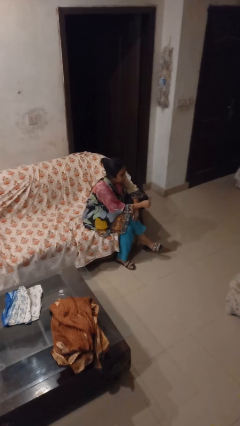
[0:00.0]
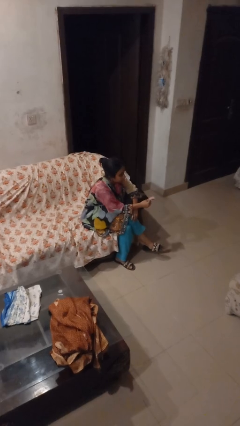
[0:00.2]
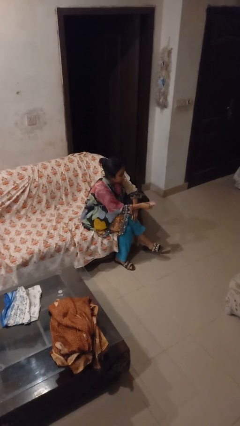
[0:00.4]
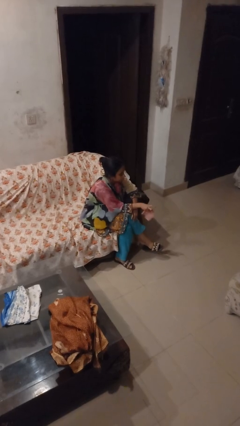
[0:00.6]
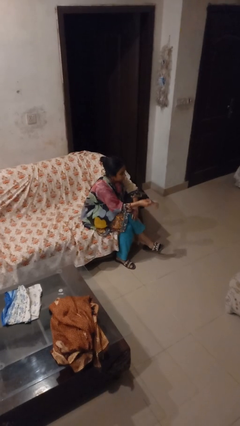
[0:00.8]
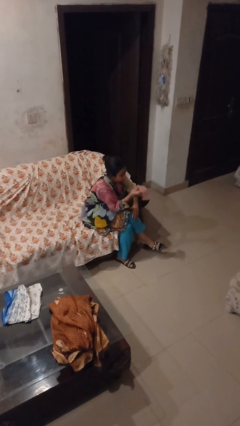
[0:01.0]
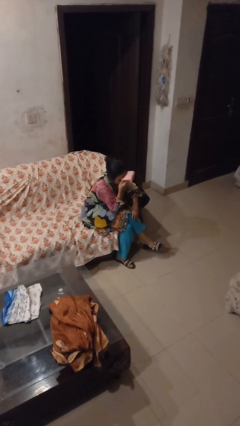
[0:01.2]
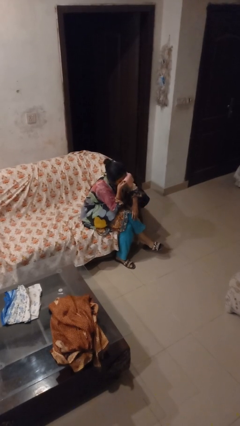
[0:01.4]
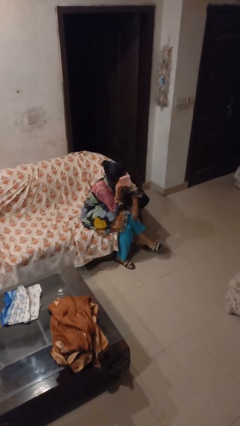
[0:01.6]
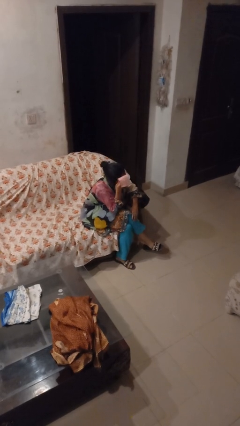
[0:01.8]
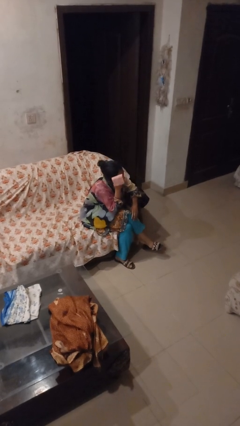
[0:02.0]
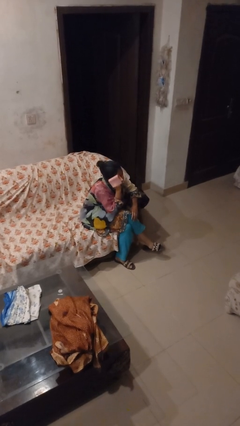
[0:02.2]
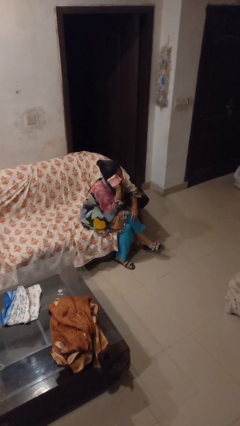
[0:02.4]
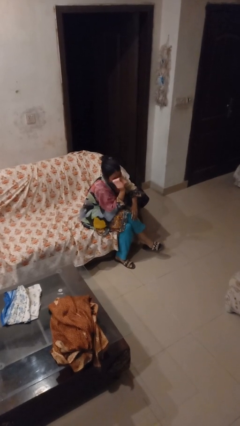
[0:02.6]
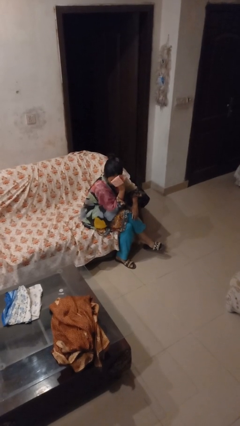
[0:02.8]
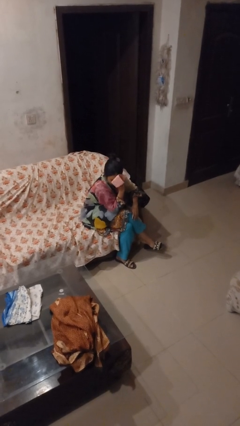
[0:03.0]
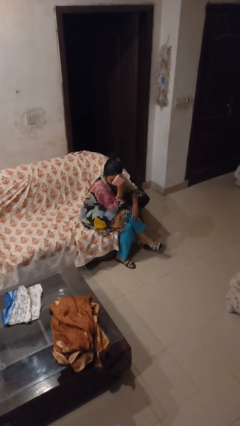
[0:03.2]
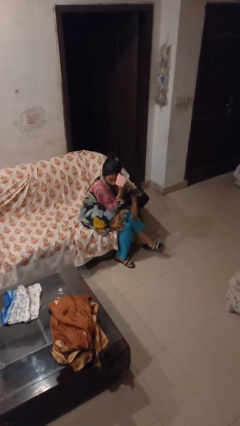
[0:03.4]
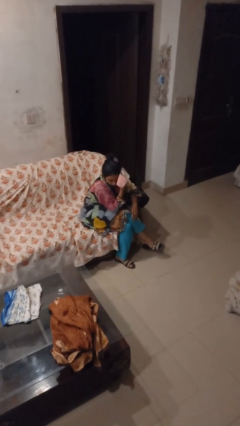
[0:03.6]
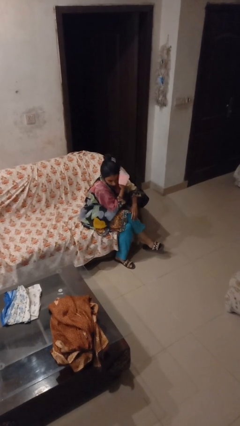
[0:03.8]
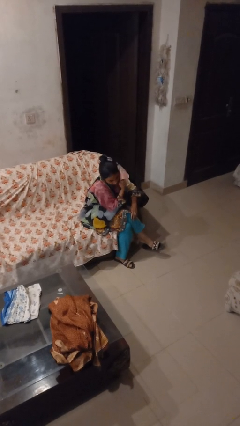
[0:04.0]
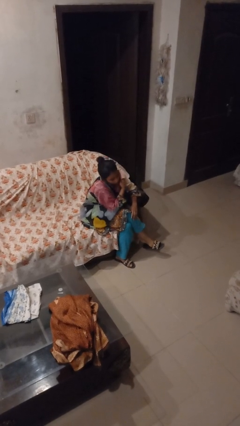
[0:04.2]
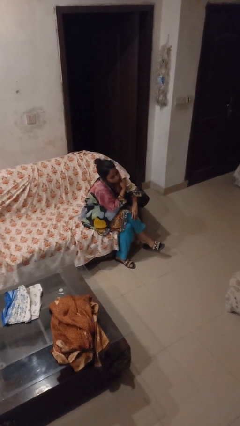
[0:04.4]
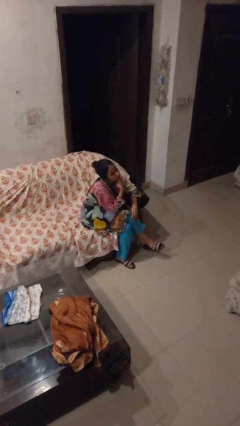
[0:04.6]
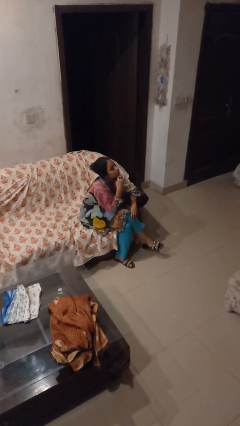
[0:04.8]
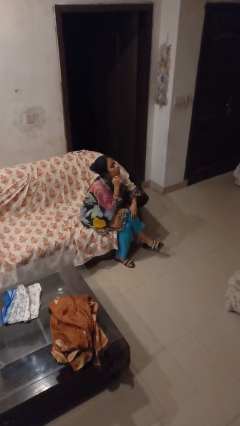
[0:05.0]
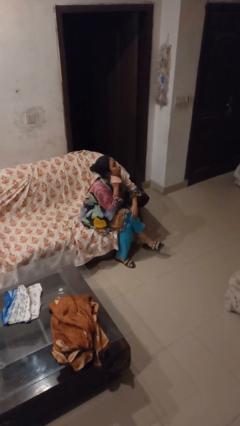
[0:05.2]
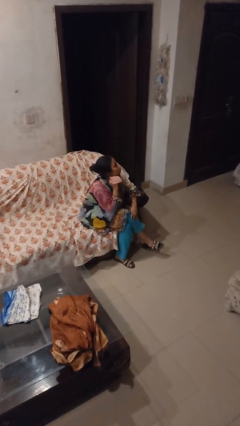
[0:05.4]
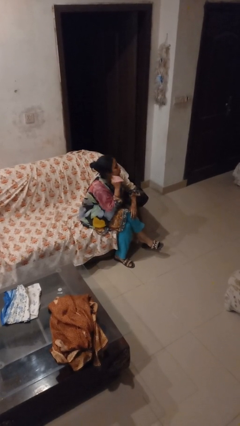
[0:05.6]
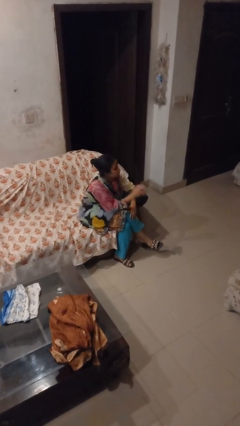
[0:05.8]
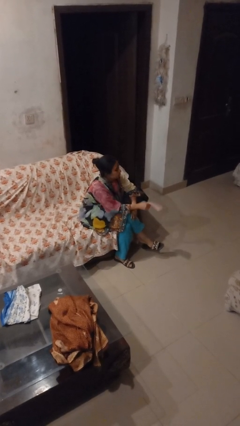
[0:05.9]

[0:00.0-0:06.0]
person wipes mouth with napkin

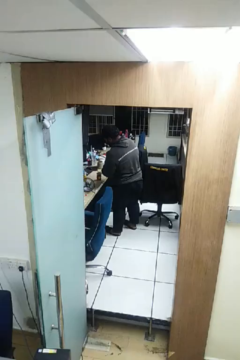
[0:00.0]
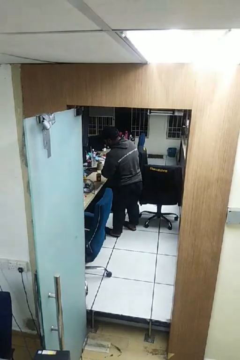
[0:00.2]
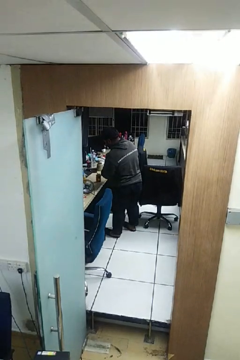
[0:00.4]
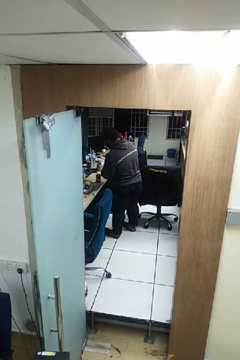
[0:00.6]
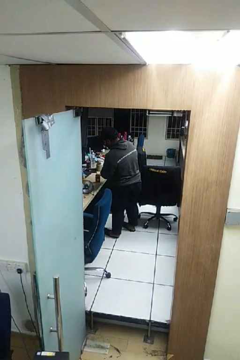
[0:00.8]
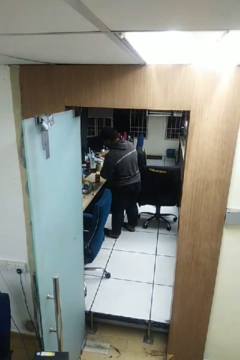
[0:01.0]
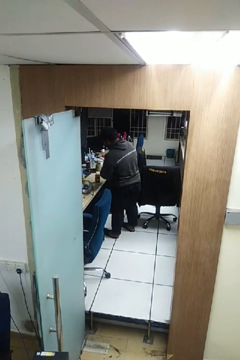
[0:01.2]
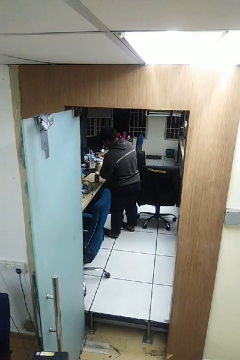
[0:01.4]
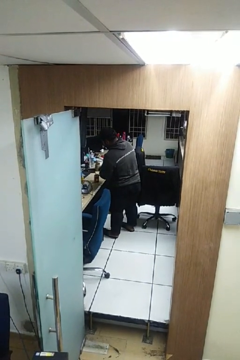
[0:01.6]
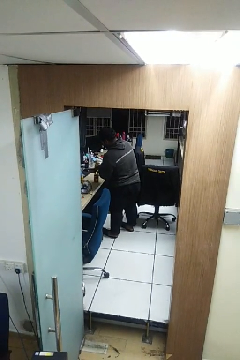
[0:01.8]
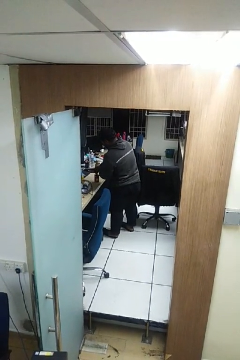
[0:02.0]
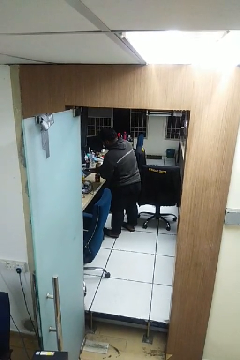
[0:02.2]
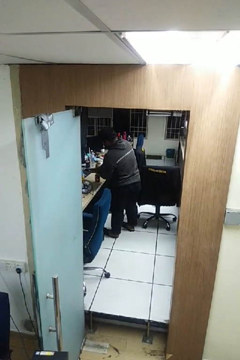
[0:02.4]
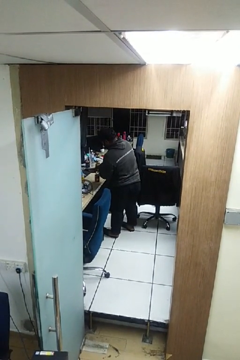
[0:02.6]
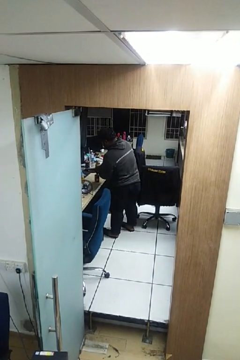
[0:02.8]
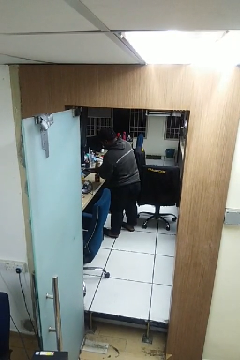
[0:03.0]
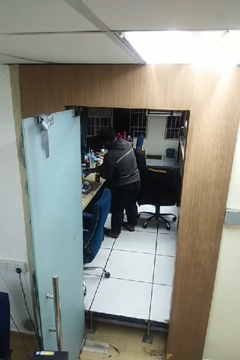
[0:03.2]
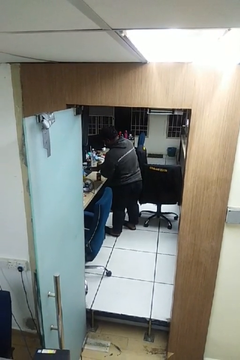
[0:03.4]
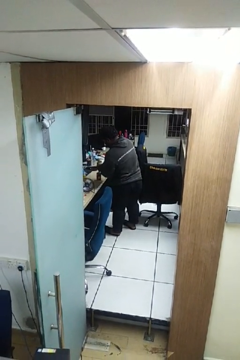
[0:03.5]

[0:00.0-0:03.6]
person opens can with can opener

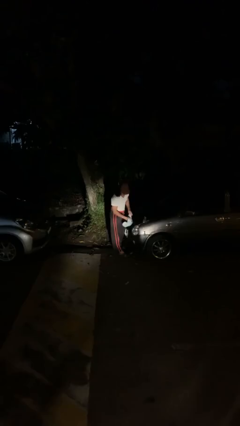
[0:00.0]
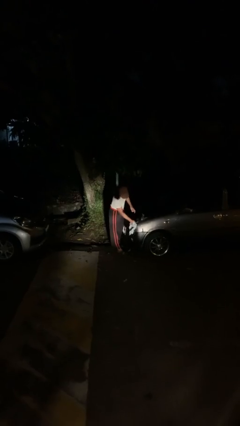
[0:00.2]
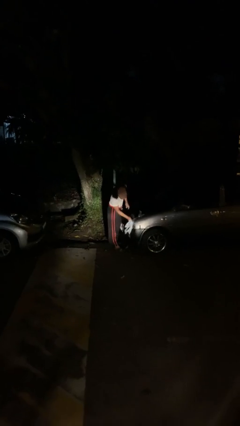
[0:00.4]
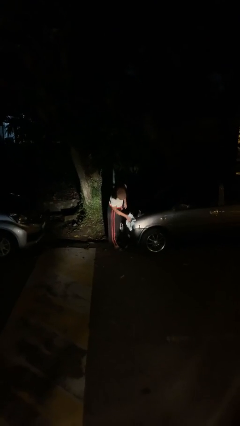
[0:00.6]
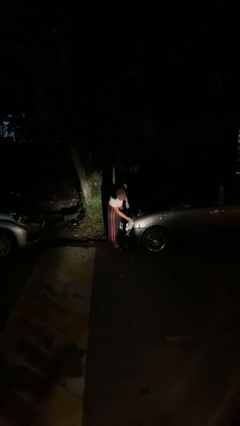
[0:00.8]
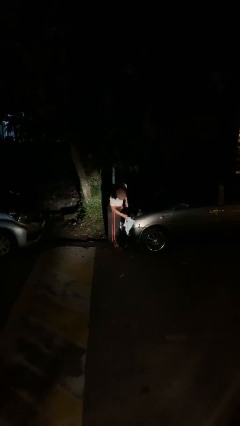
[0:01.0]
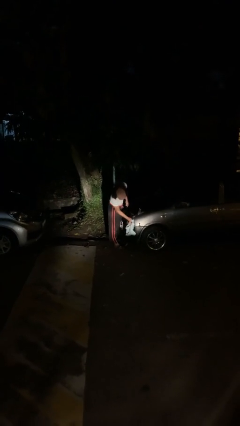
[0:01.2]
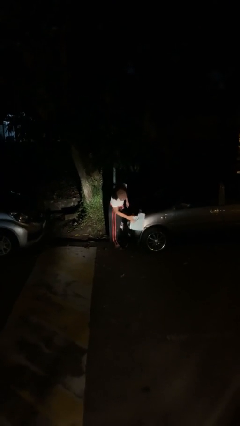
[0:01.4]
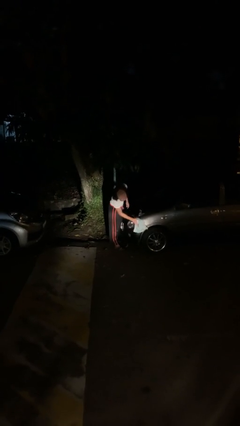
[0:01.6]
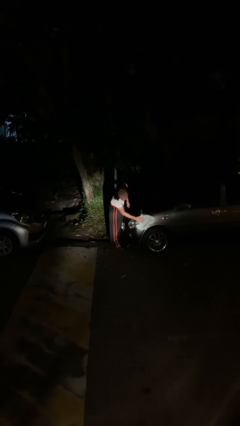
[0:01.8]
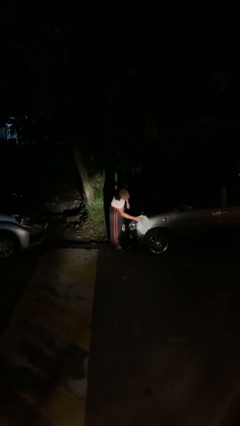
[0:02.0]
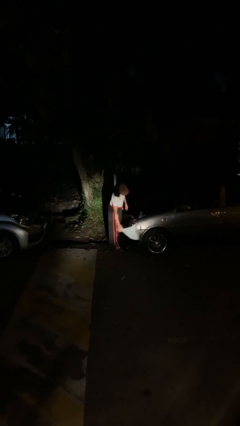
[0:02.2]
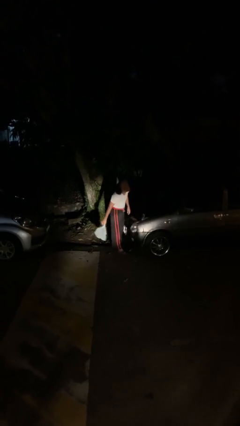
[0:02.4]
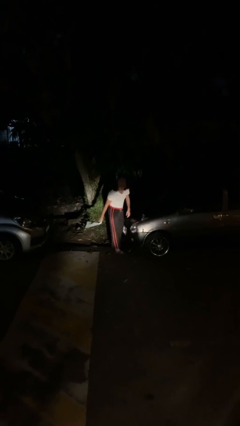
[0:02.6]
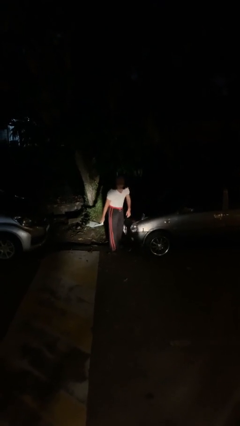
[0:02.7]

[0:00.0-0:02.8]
person polishes car with rag

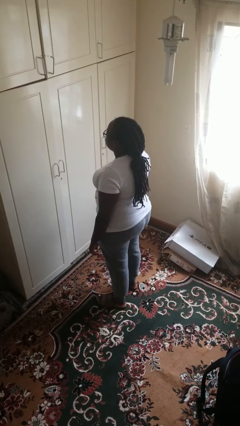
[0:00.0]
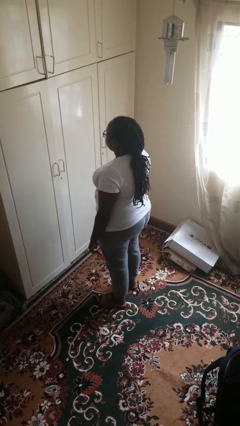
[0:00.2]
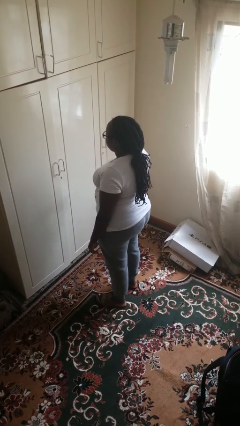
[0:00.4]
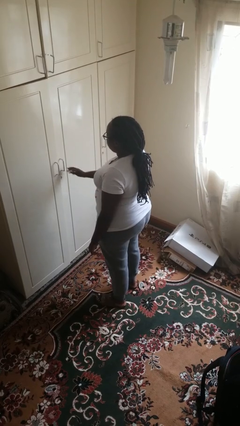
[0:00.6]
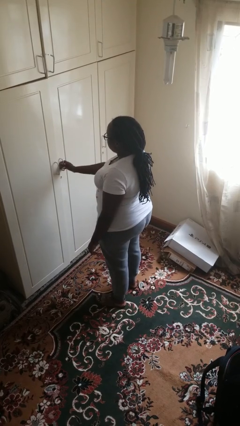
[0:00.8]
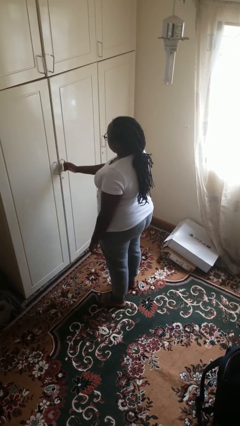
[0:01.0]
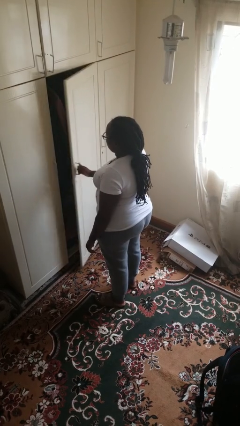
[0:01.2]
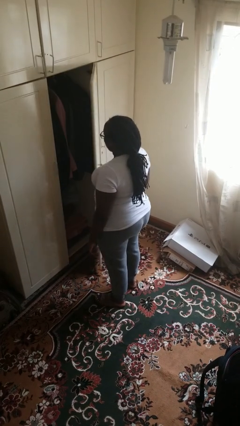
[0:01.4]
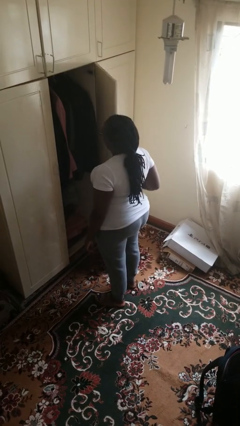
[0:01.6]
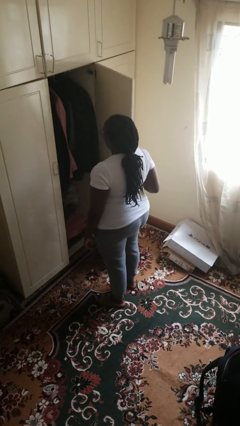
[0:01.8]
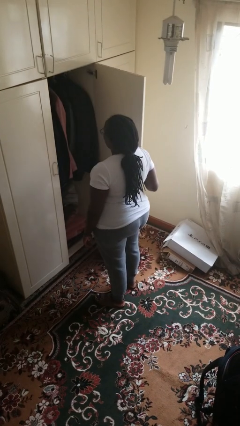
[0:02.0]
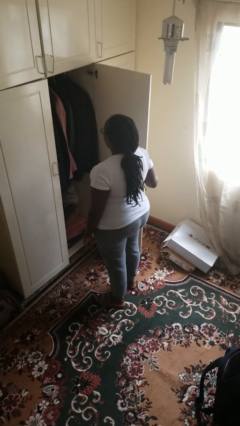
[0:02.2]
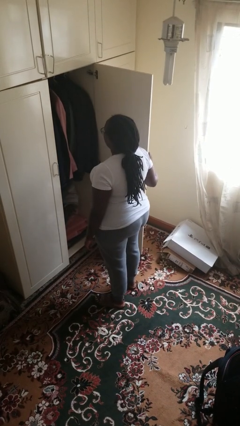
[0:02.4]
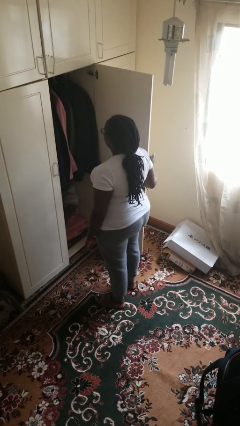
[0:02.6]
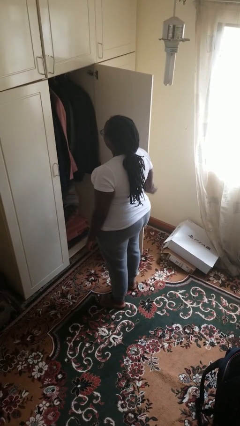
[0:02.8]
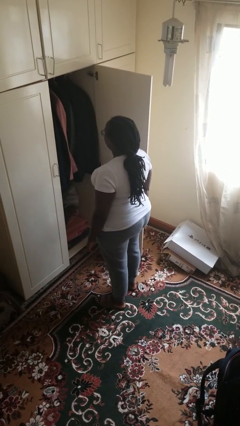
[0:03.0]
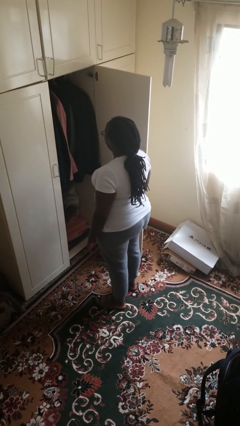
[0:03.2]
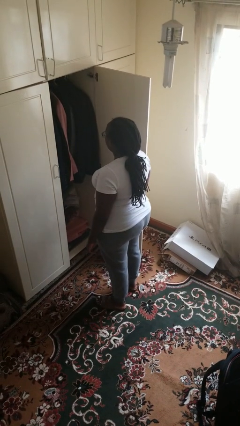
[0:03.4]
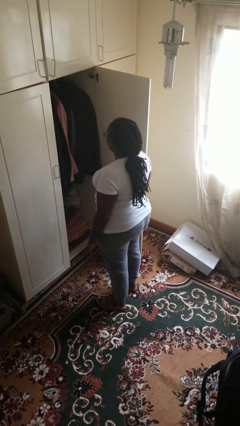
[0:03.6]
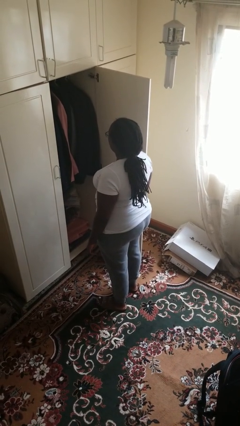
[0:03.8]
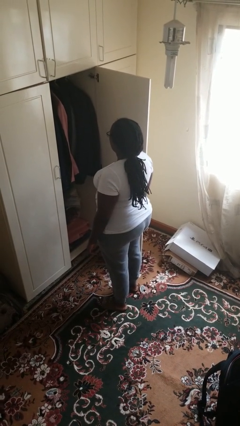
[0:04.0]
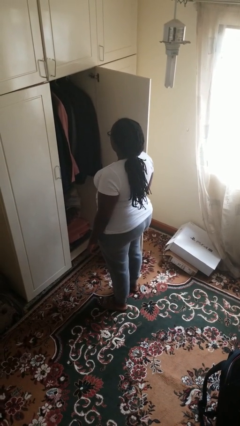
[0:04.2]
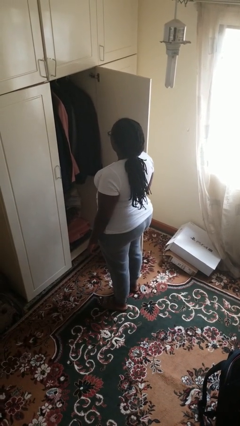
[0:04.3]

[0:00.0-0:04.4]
person opens closet door

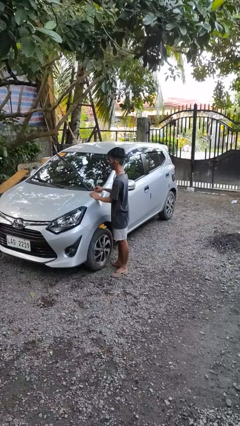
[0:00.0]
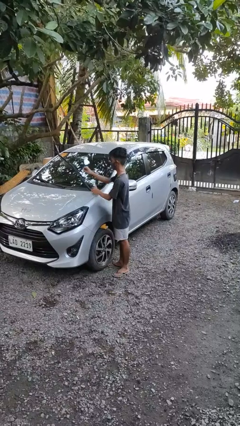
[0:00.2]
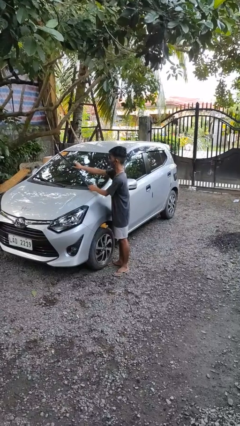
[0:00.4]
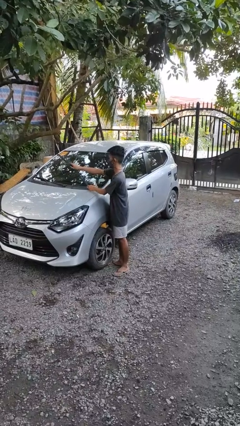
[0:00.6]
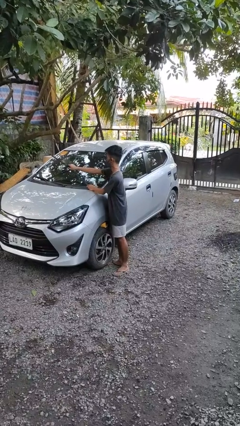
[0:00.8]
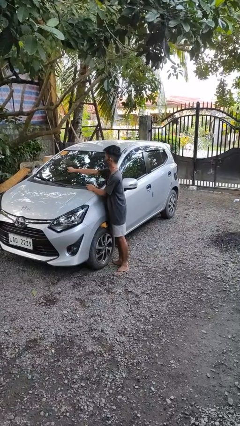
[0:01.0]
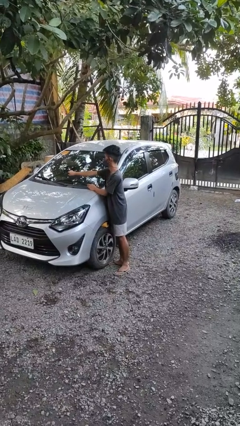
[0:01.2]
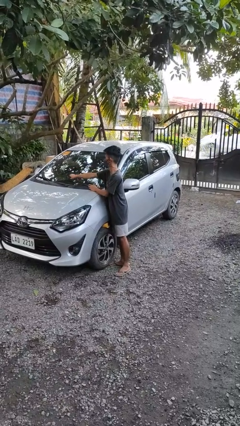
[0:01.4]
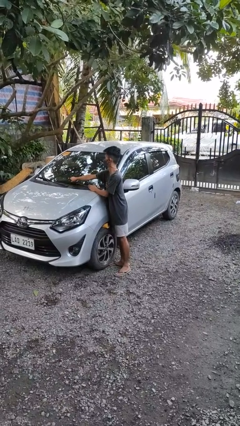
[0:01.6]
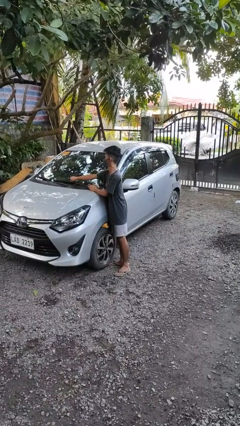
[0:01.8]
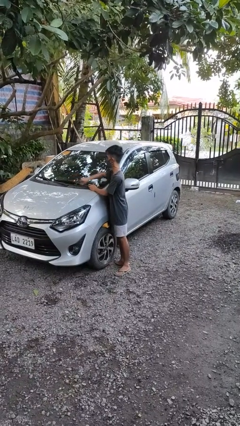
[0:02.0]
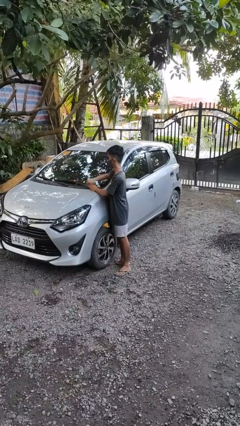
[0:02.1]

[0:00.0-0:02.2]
person flips down car wipers
